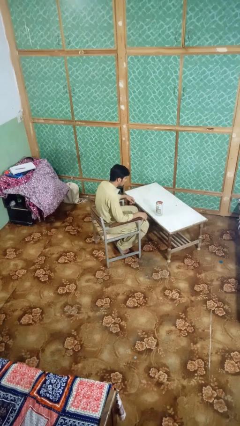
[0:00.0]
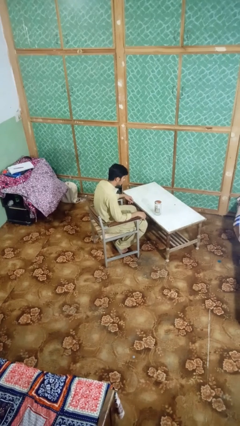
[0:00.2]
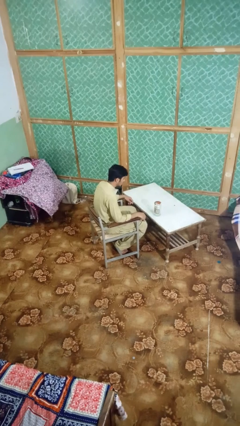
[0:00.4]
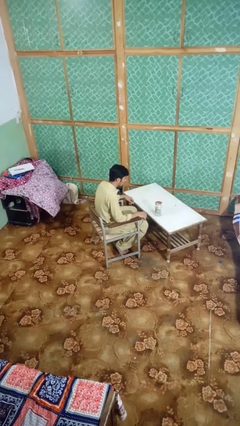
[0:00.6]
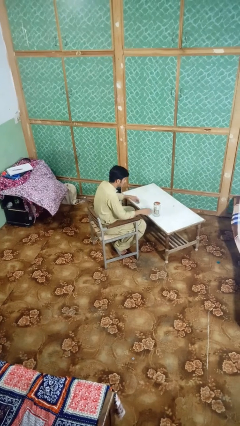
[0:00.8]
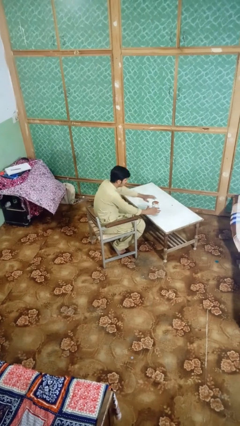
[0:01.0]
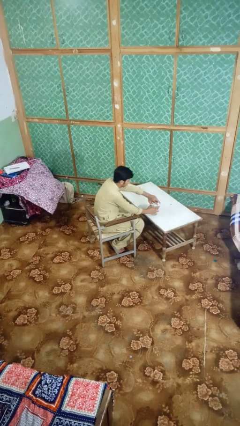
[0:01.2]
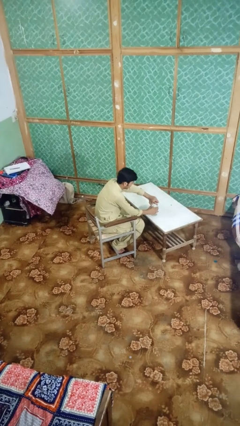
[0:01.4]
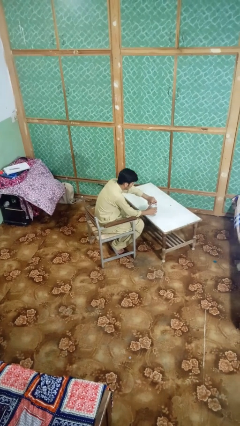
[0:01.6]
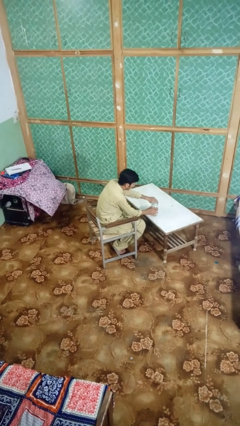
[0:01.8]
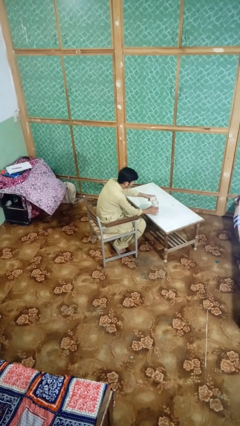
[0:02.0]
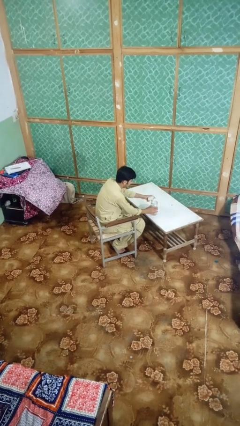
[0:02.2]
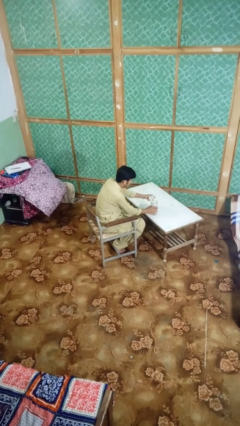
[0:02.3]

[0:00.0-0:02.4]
person opens jar

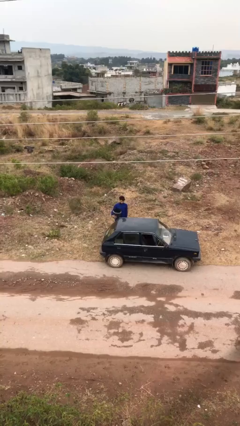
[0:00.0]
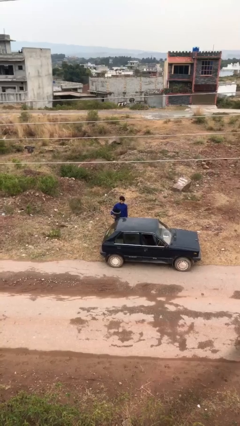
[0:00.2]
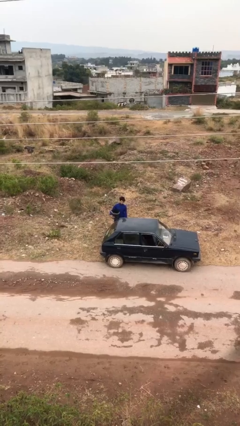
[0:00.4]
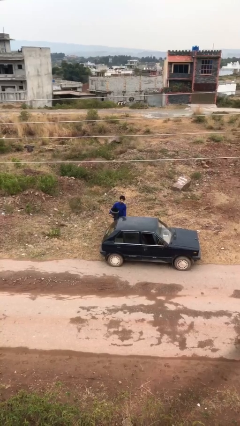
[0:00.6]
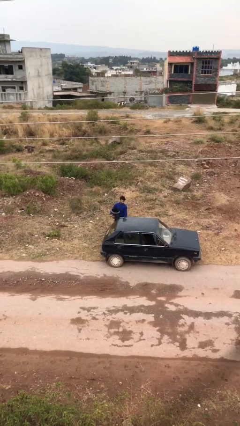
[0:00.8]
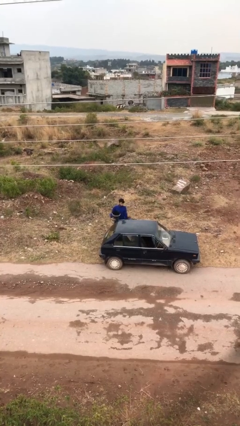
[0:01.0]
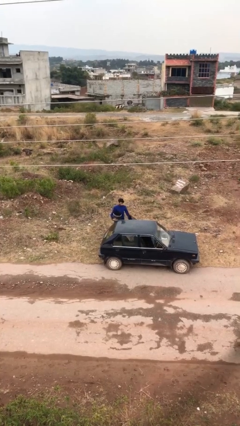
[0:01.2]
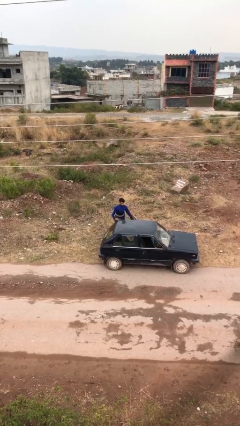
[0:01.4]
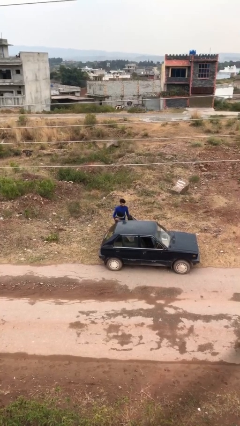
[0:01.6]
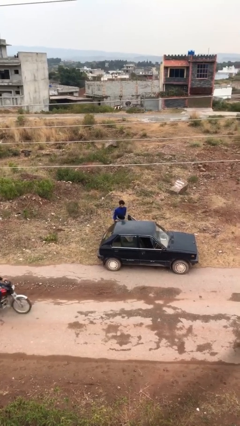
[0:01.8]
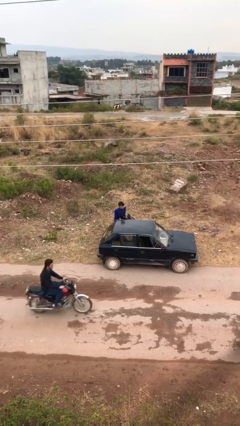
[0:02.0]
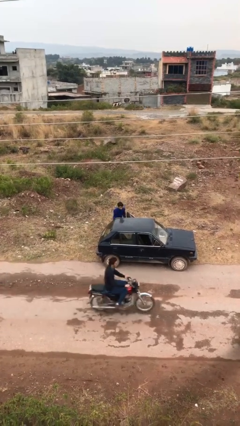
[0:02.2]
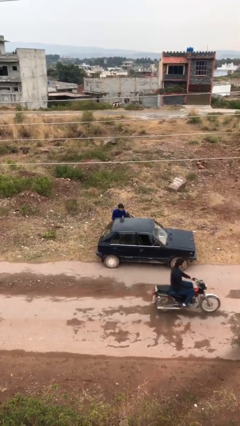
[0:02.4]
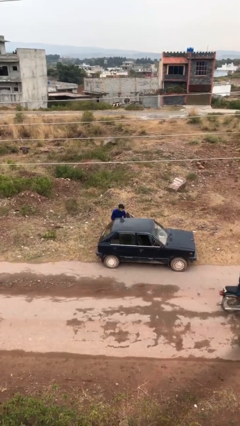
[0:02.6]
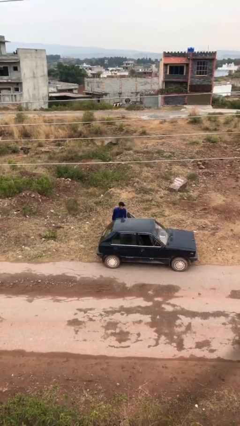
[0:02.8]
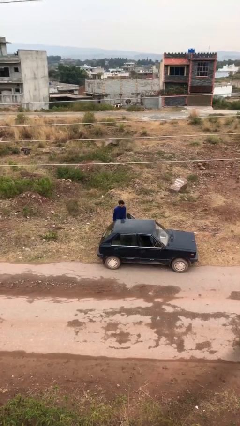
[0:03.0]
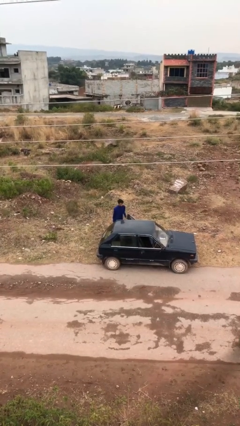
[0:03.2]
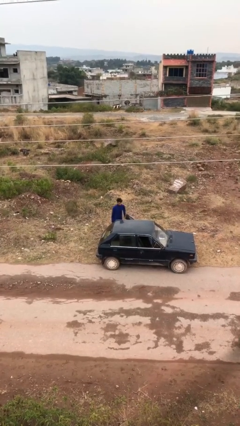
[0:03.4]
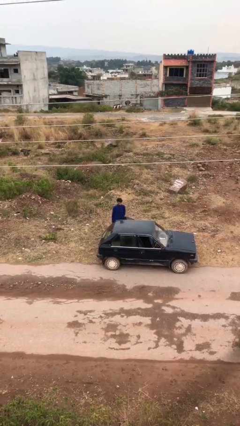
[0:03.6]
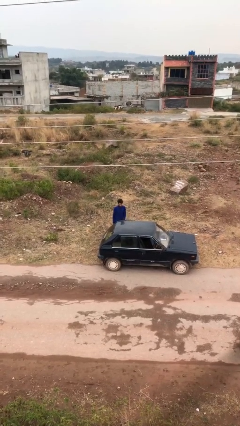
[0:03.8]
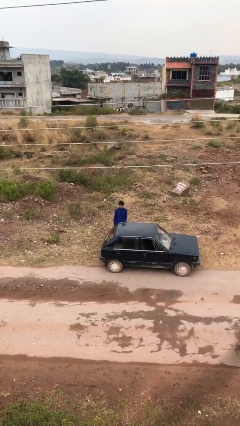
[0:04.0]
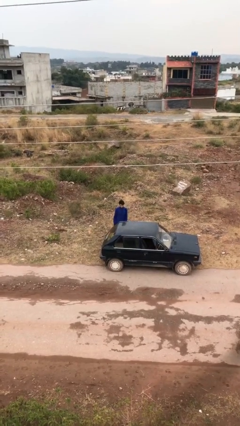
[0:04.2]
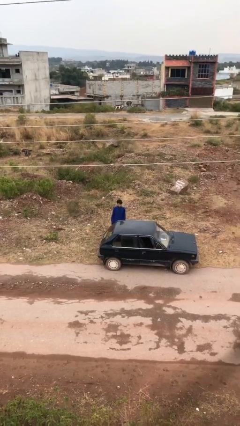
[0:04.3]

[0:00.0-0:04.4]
person loads car

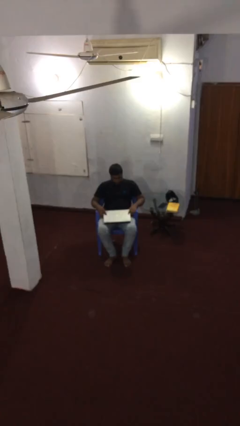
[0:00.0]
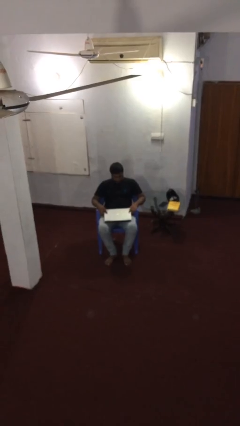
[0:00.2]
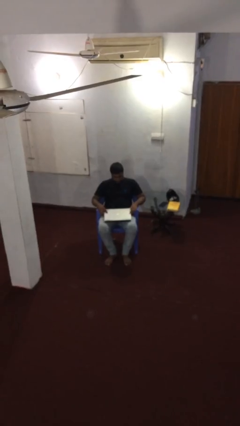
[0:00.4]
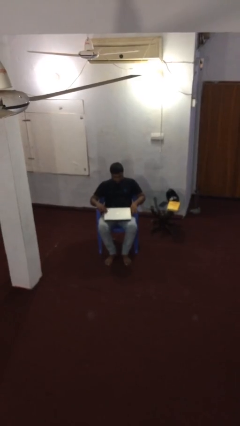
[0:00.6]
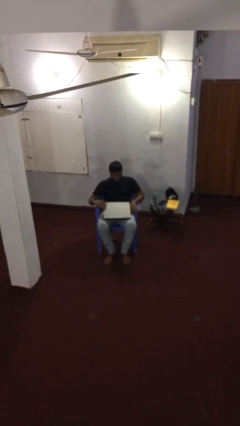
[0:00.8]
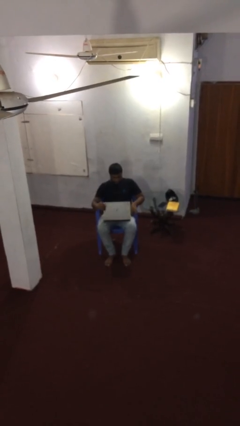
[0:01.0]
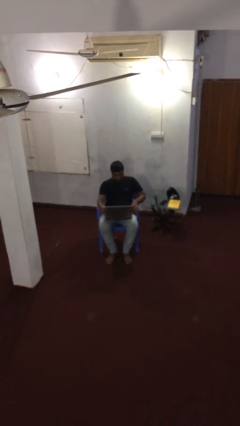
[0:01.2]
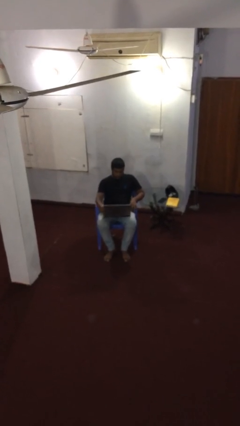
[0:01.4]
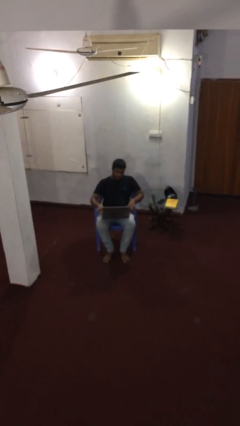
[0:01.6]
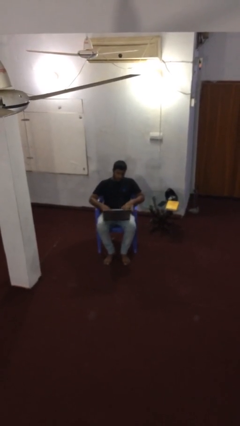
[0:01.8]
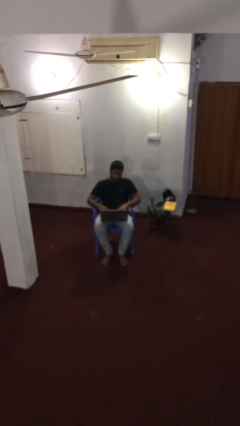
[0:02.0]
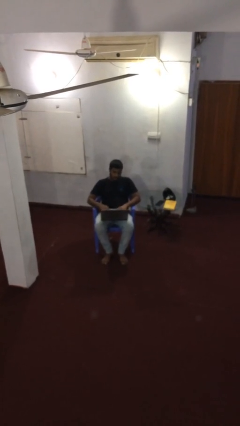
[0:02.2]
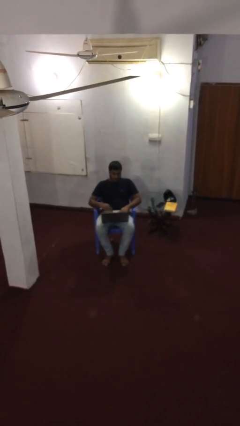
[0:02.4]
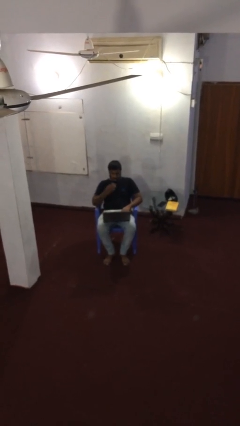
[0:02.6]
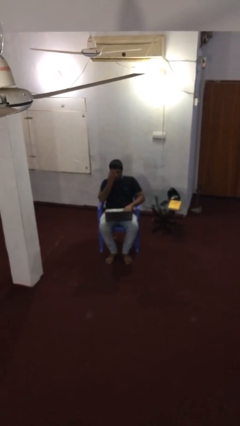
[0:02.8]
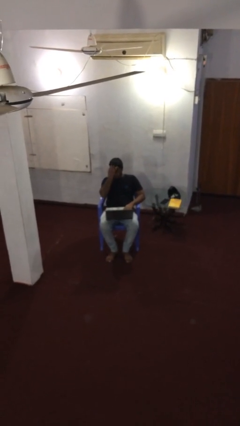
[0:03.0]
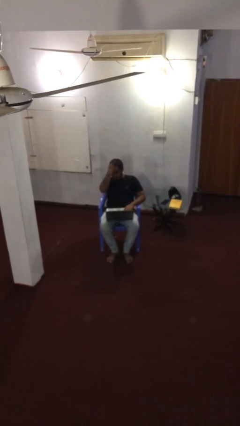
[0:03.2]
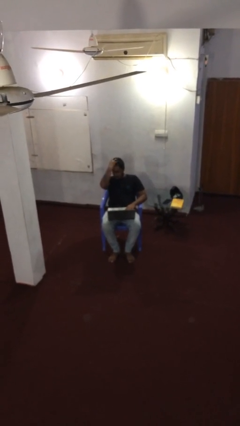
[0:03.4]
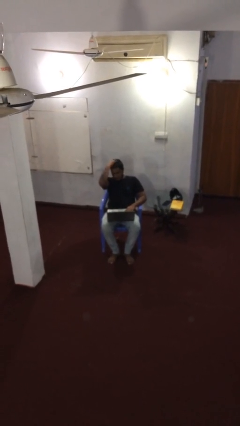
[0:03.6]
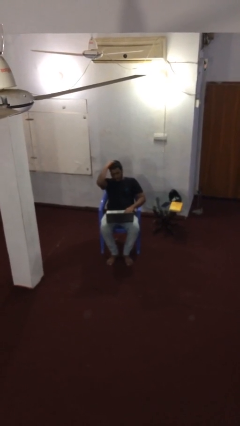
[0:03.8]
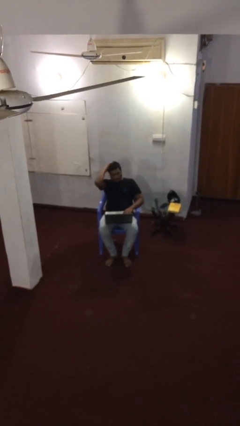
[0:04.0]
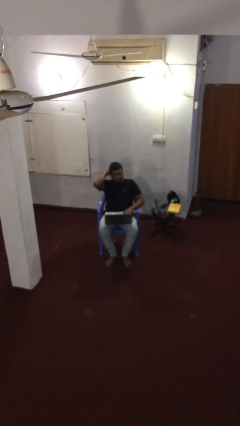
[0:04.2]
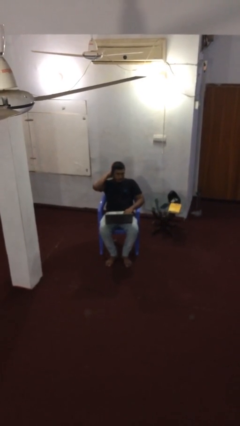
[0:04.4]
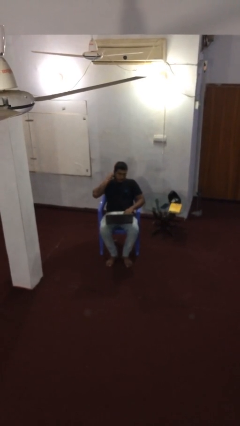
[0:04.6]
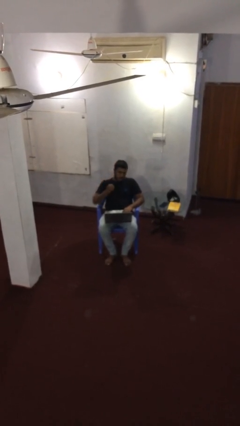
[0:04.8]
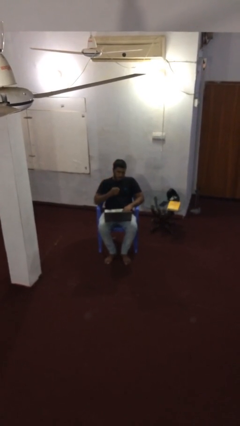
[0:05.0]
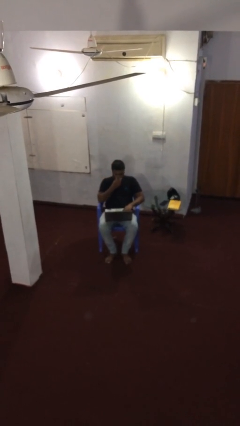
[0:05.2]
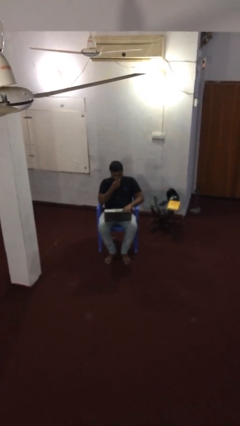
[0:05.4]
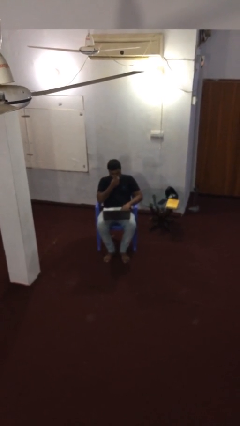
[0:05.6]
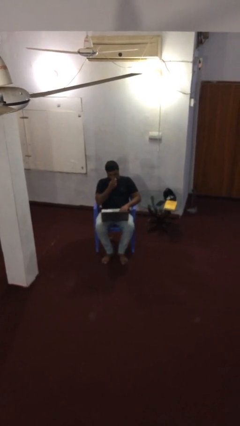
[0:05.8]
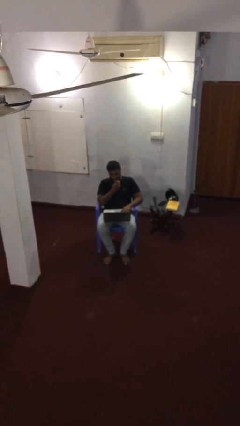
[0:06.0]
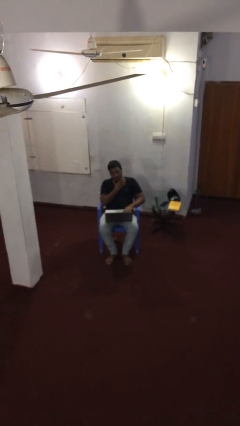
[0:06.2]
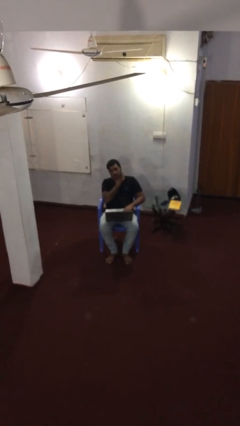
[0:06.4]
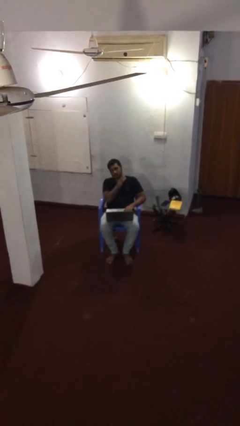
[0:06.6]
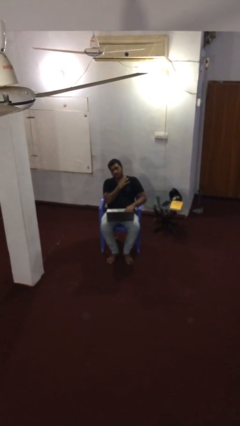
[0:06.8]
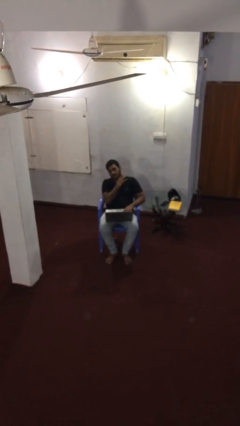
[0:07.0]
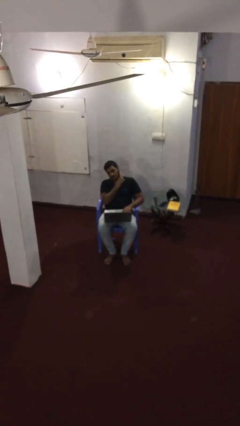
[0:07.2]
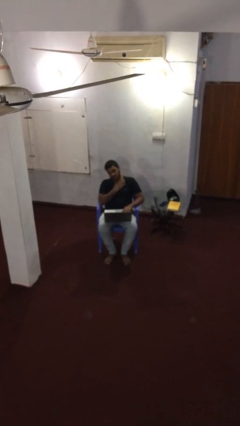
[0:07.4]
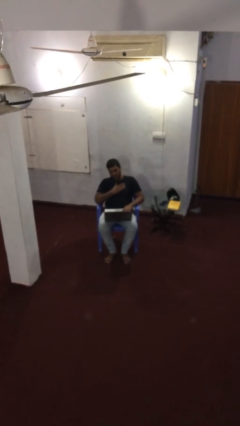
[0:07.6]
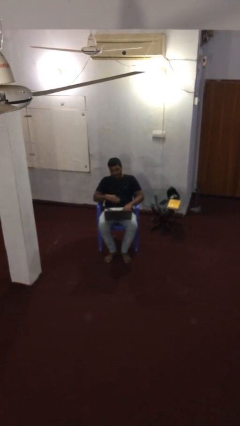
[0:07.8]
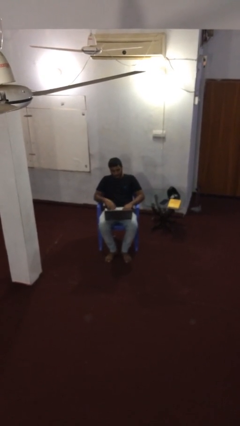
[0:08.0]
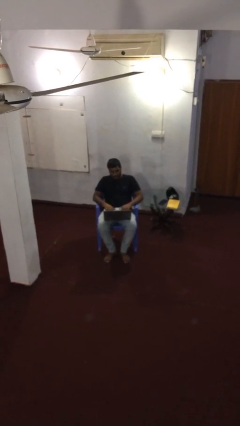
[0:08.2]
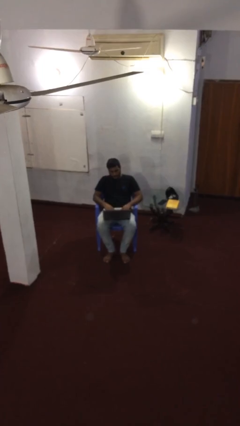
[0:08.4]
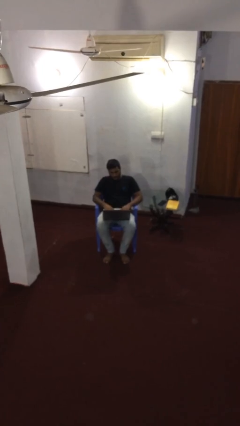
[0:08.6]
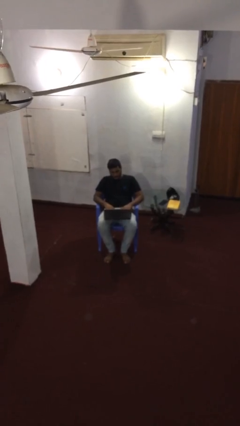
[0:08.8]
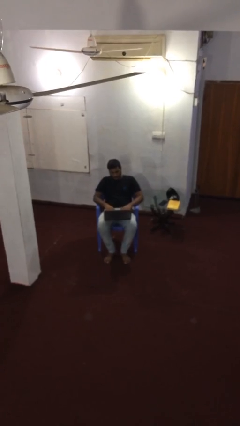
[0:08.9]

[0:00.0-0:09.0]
person interacts with laptop

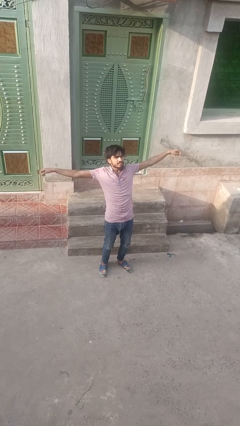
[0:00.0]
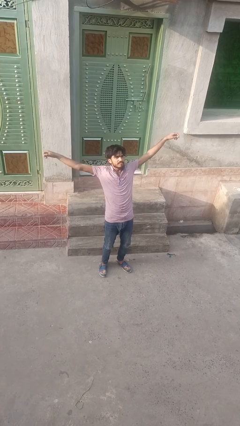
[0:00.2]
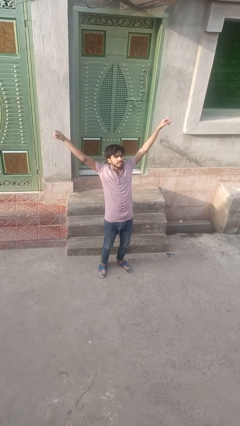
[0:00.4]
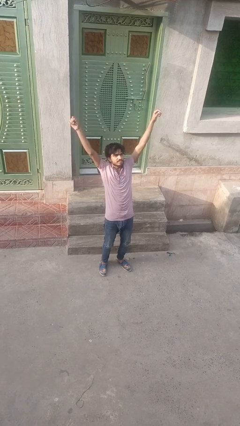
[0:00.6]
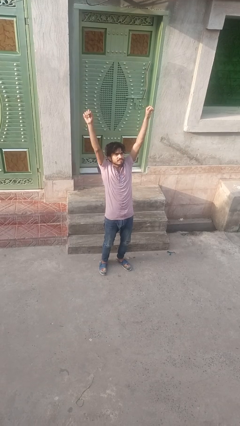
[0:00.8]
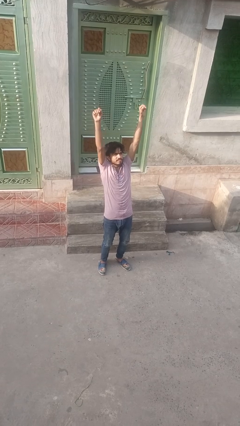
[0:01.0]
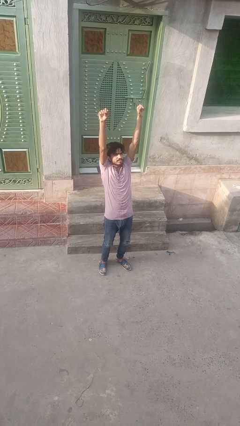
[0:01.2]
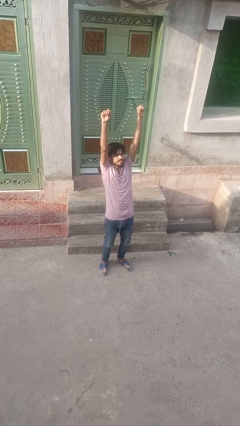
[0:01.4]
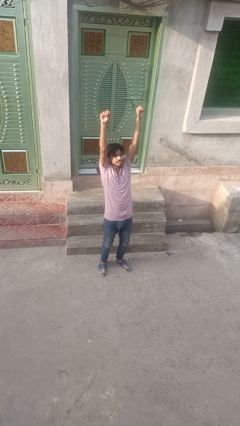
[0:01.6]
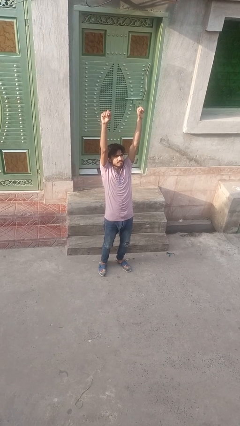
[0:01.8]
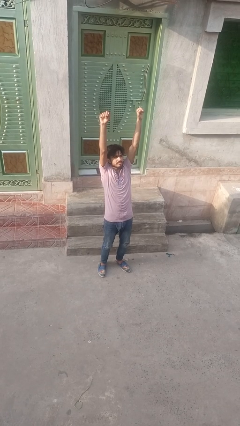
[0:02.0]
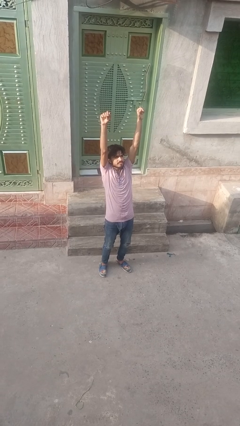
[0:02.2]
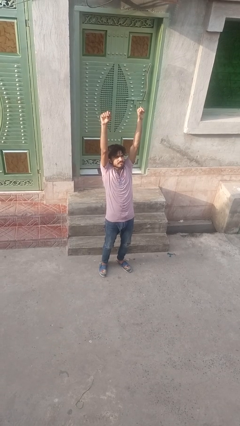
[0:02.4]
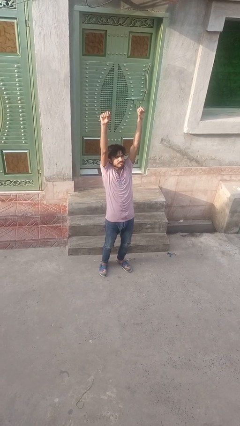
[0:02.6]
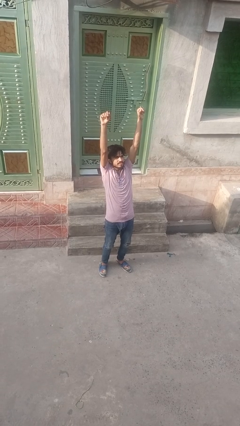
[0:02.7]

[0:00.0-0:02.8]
person stretches arms over head
